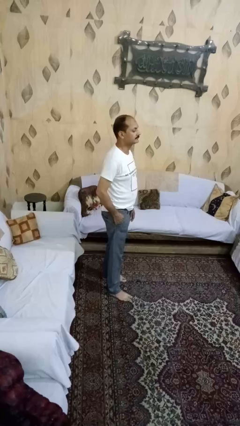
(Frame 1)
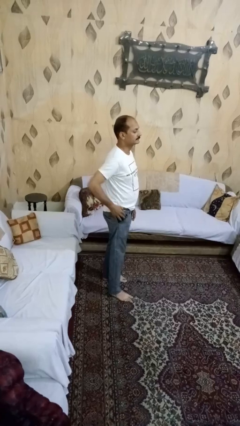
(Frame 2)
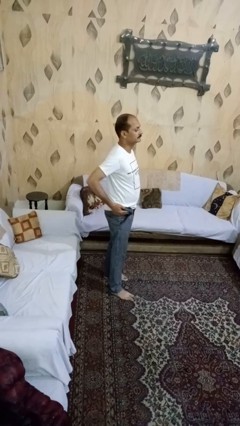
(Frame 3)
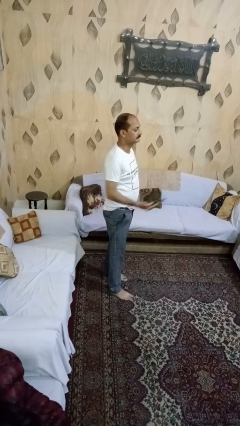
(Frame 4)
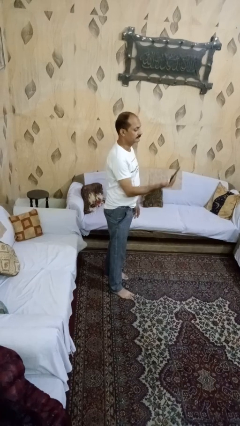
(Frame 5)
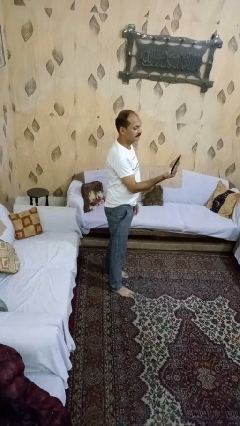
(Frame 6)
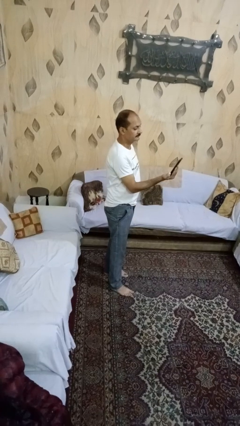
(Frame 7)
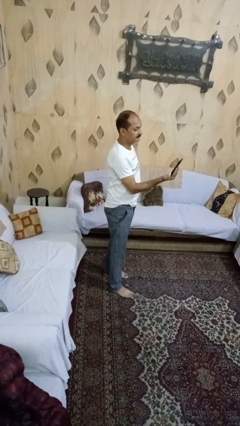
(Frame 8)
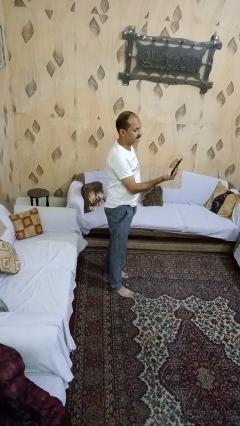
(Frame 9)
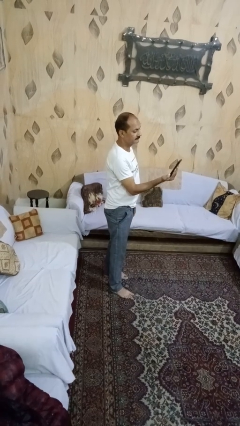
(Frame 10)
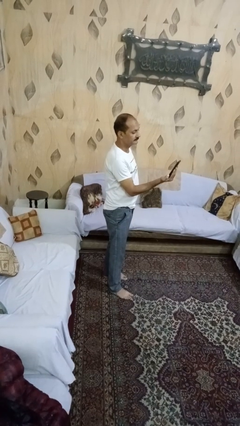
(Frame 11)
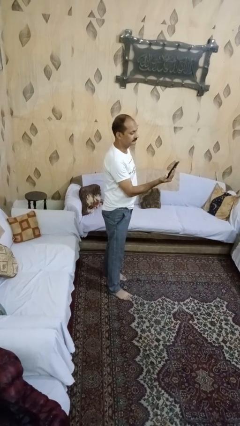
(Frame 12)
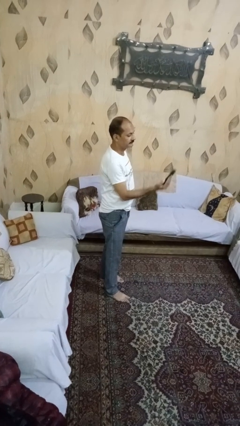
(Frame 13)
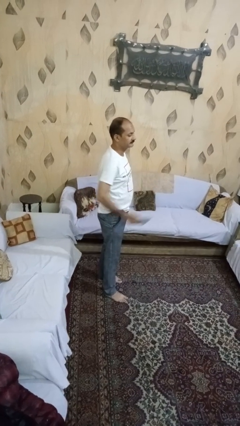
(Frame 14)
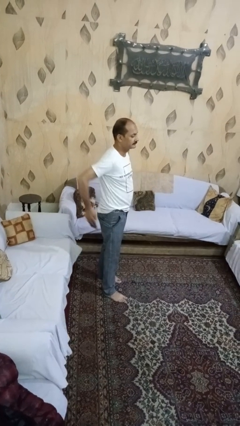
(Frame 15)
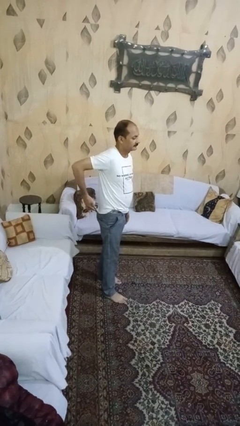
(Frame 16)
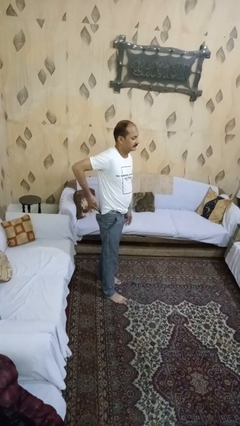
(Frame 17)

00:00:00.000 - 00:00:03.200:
person takes phone from pocket

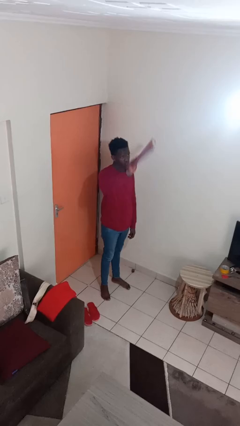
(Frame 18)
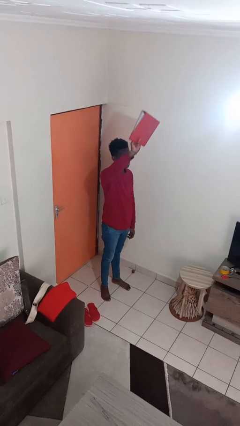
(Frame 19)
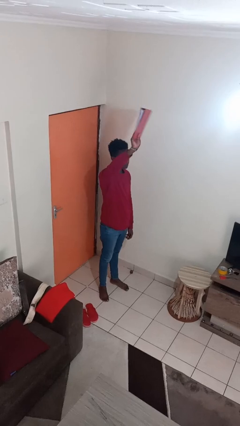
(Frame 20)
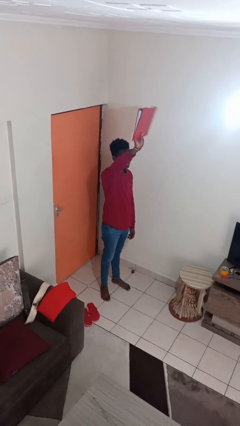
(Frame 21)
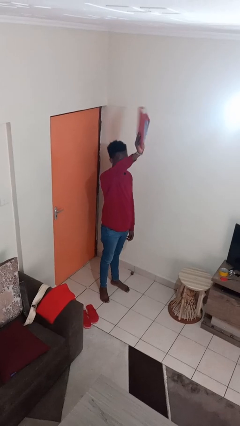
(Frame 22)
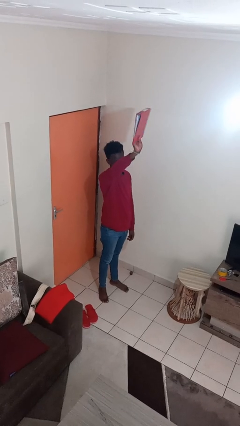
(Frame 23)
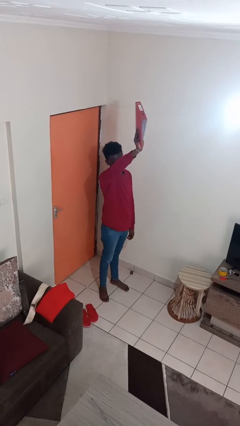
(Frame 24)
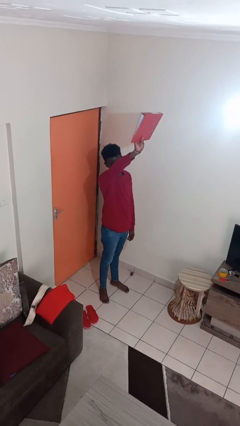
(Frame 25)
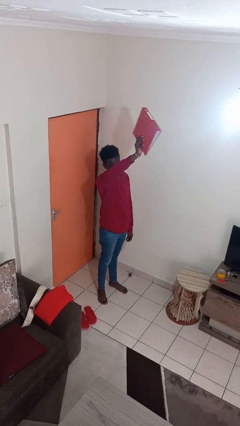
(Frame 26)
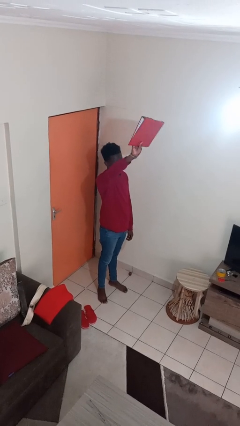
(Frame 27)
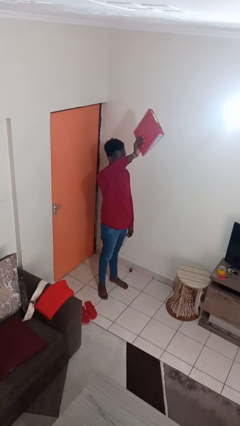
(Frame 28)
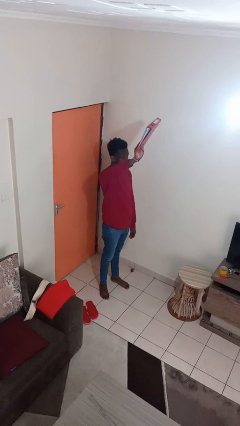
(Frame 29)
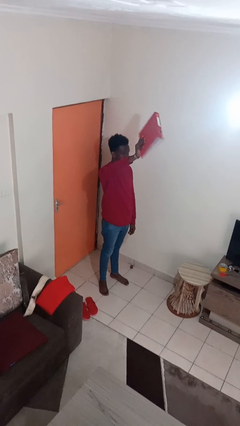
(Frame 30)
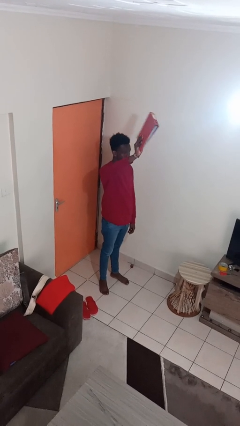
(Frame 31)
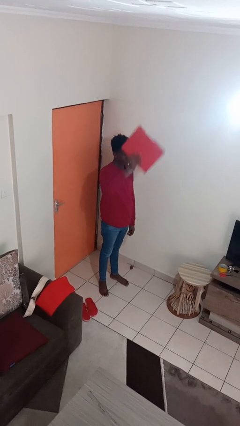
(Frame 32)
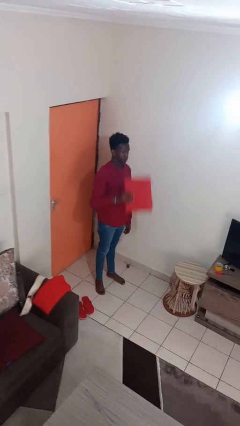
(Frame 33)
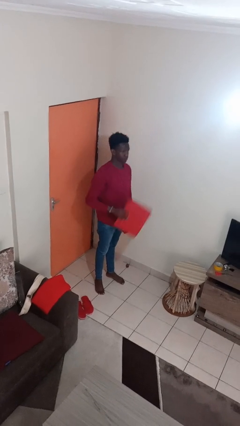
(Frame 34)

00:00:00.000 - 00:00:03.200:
person holds object above head

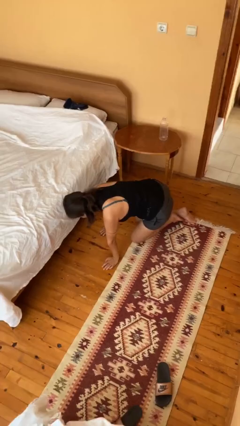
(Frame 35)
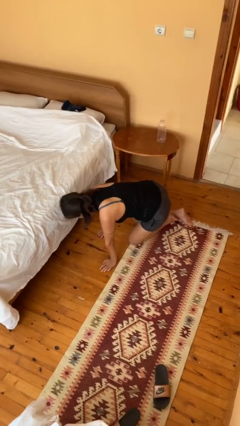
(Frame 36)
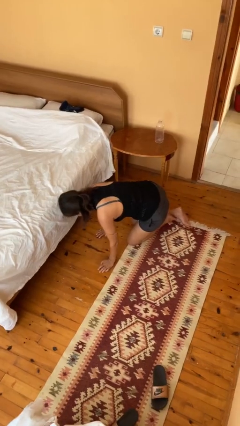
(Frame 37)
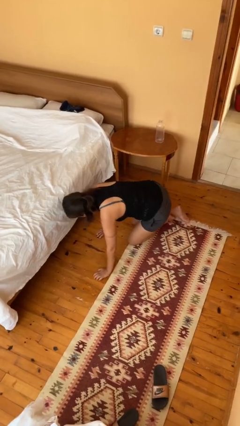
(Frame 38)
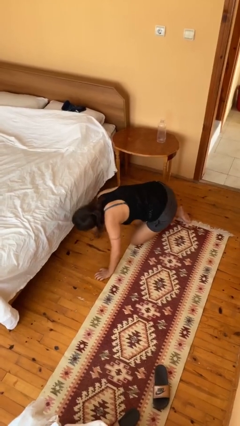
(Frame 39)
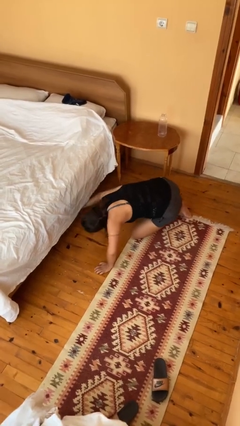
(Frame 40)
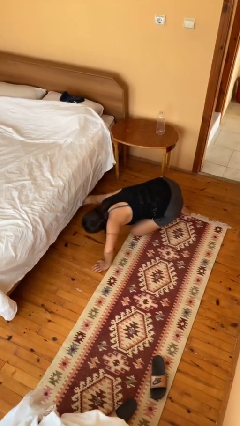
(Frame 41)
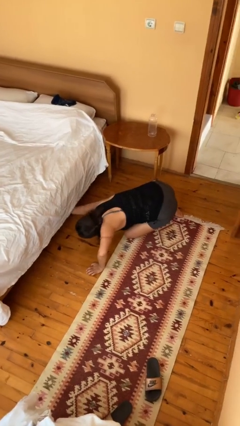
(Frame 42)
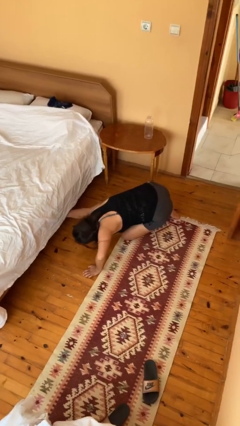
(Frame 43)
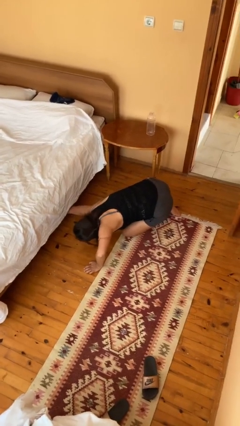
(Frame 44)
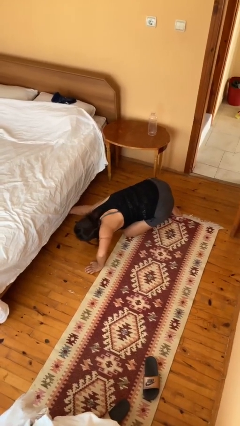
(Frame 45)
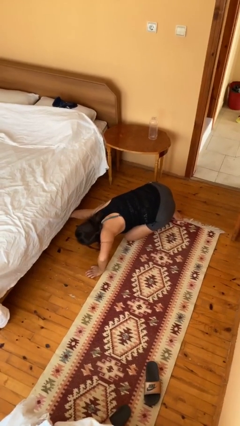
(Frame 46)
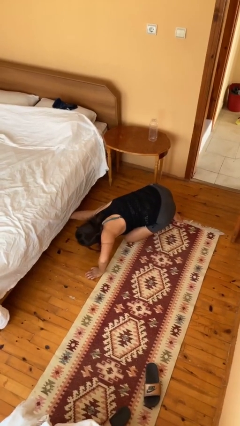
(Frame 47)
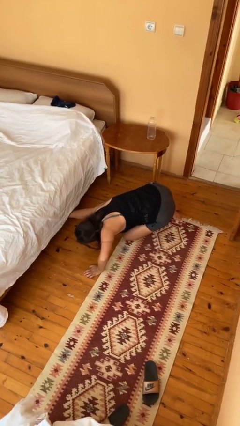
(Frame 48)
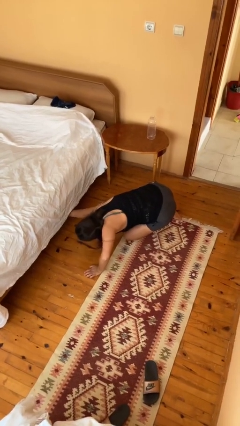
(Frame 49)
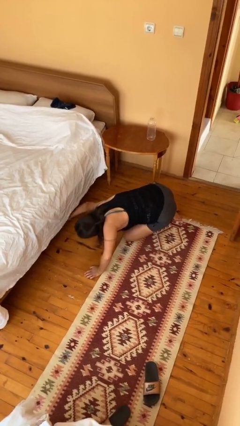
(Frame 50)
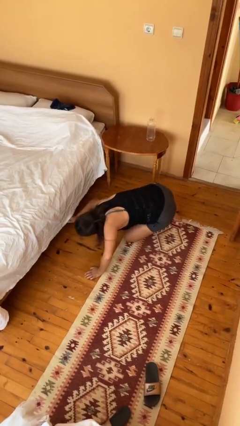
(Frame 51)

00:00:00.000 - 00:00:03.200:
person searches under bed

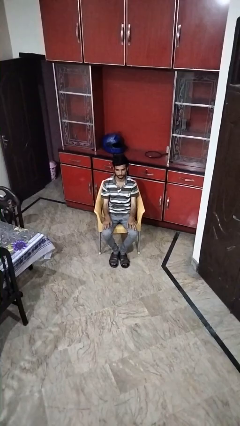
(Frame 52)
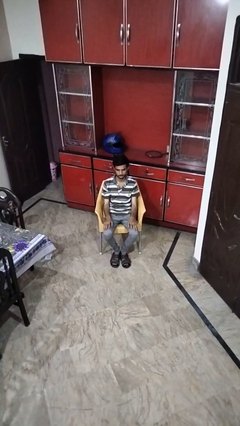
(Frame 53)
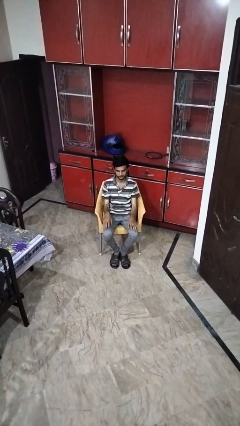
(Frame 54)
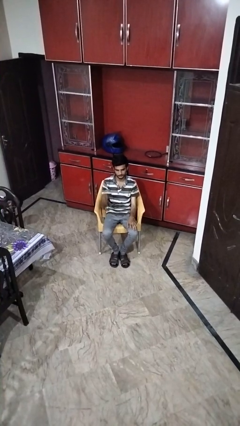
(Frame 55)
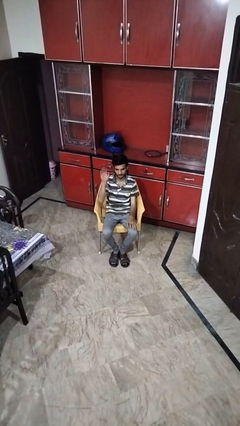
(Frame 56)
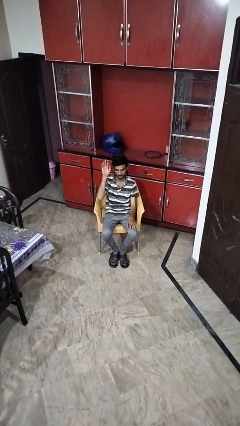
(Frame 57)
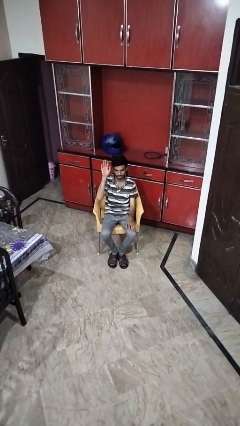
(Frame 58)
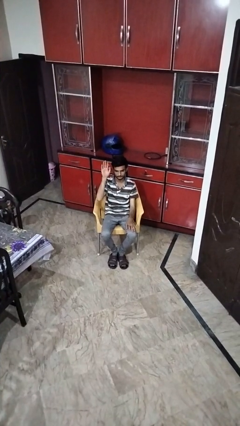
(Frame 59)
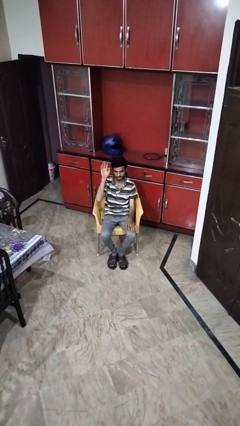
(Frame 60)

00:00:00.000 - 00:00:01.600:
person gestures raise hand

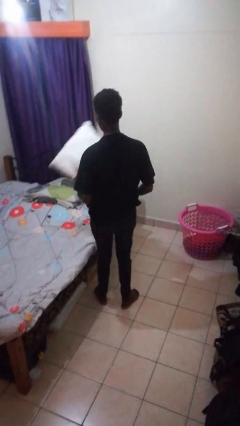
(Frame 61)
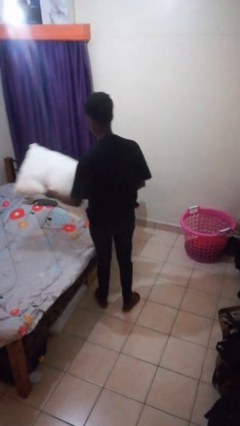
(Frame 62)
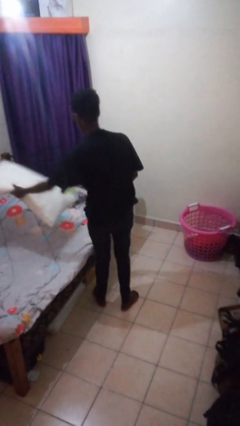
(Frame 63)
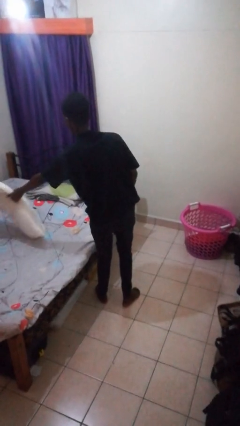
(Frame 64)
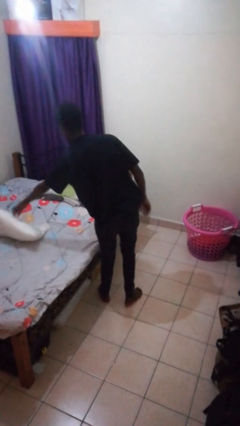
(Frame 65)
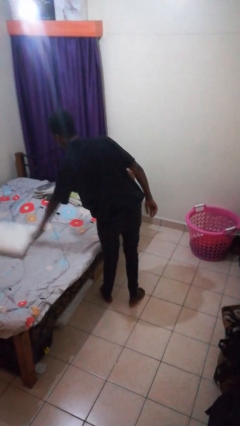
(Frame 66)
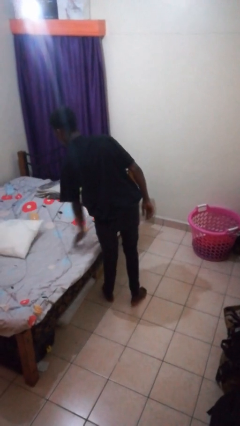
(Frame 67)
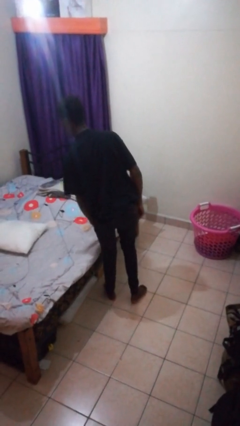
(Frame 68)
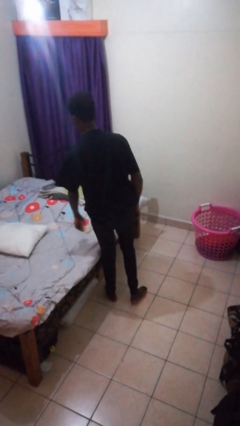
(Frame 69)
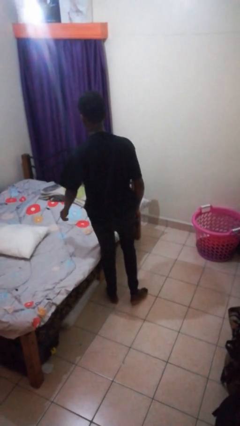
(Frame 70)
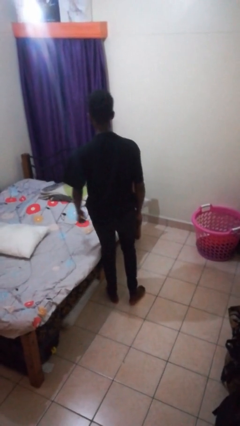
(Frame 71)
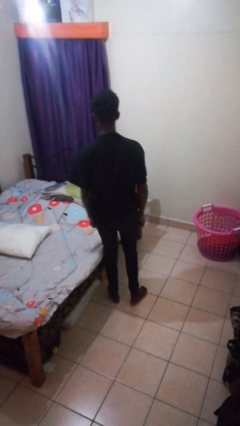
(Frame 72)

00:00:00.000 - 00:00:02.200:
person puts down object on bed

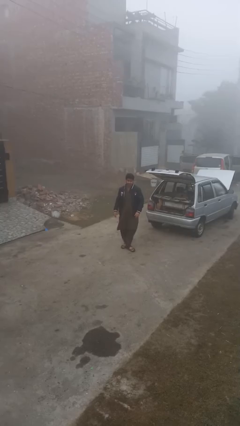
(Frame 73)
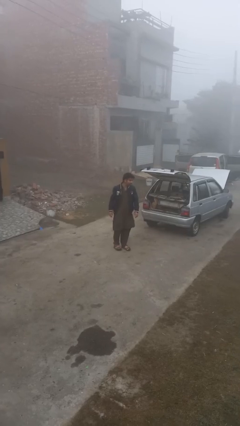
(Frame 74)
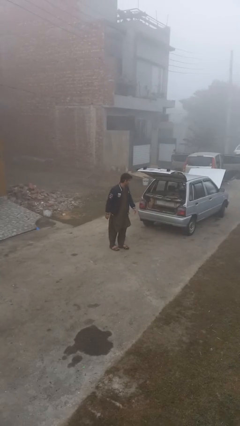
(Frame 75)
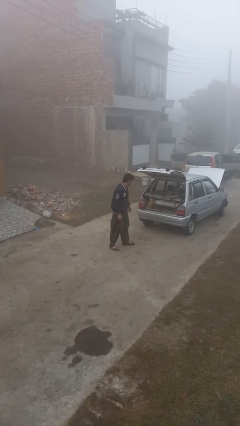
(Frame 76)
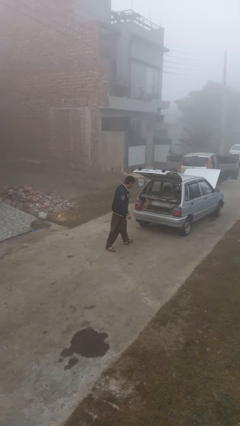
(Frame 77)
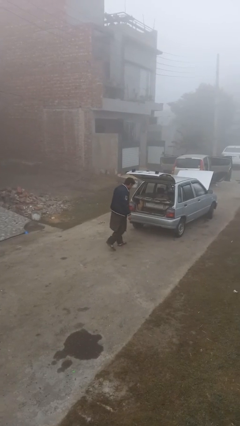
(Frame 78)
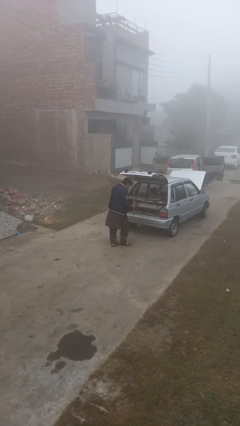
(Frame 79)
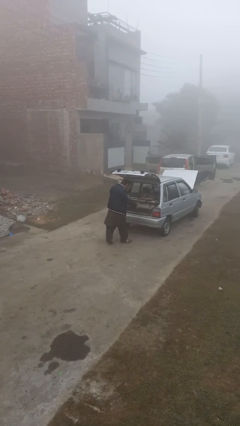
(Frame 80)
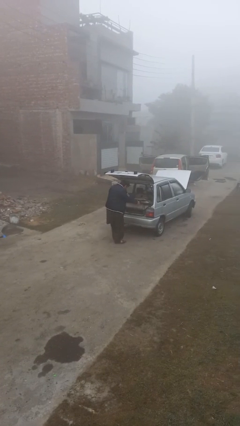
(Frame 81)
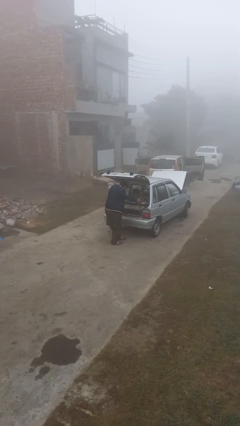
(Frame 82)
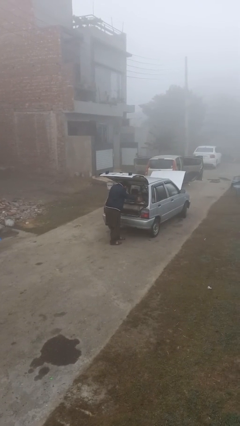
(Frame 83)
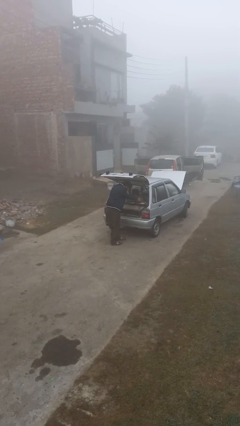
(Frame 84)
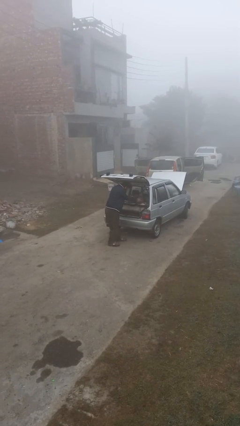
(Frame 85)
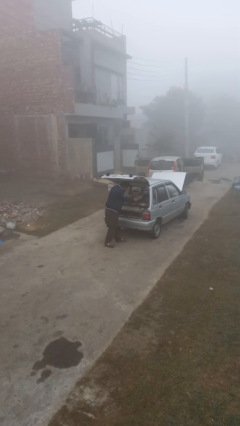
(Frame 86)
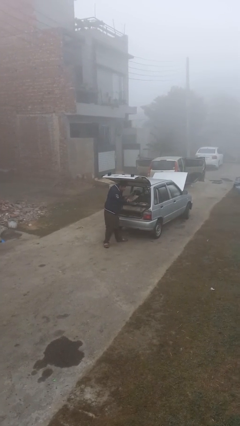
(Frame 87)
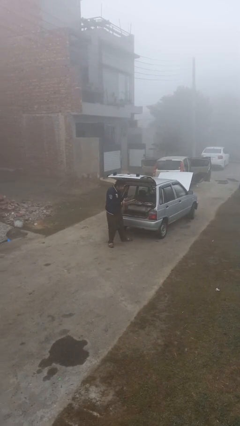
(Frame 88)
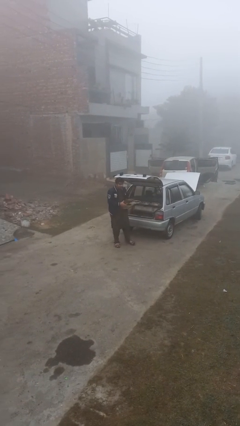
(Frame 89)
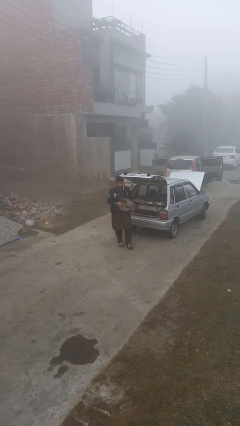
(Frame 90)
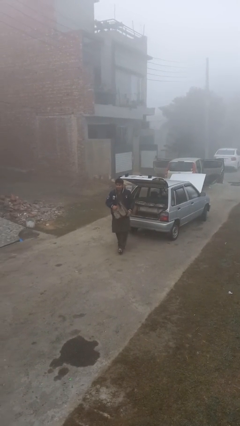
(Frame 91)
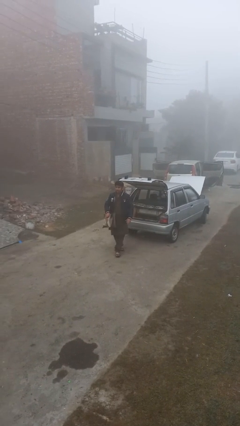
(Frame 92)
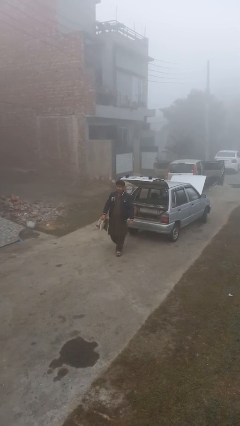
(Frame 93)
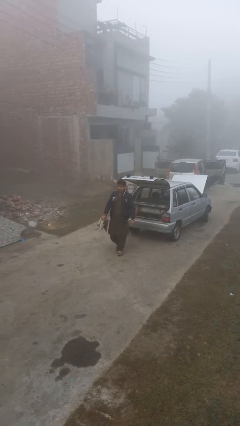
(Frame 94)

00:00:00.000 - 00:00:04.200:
person unloads car
